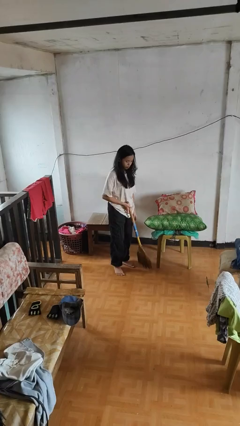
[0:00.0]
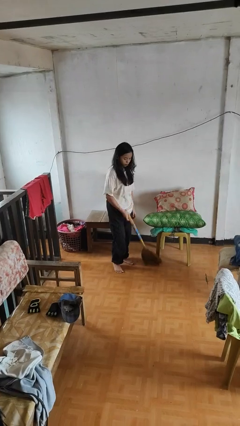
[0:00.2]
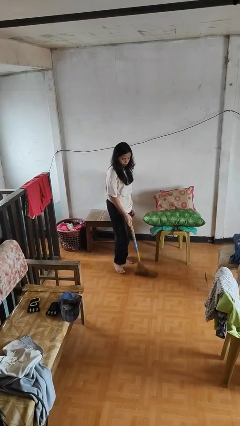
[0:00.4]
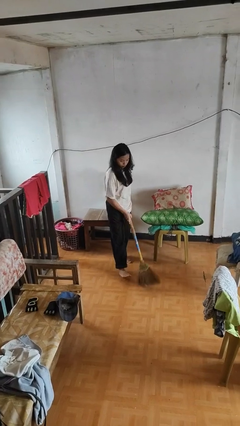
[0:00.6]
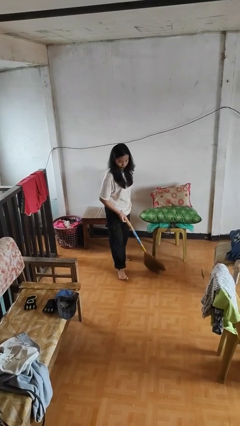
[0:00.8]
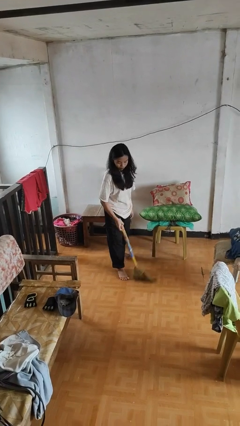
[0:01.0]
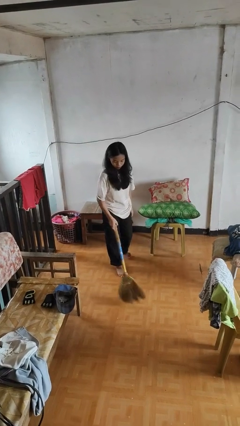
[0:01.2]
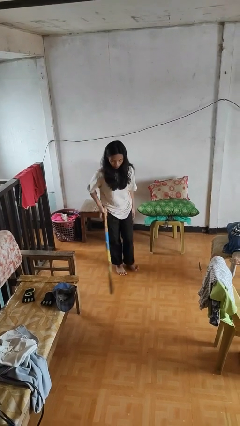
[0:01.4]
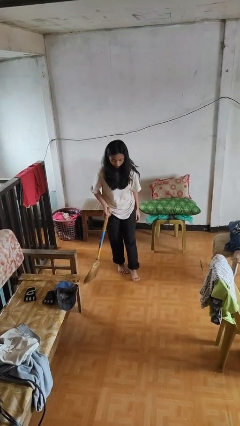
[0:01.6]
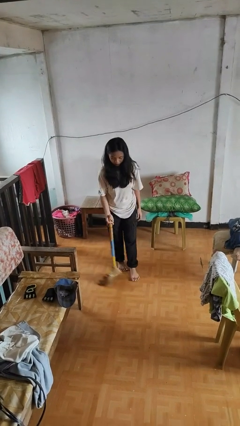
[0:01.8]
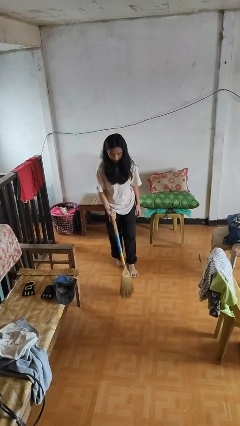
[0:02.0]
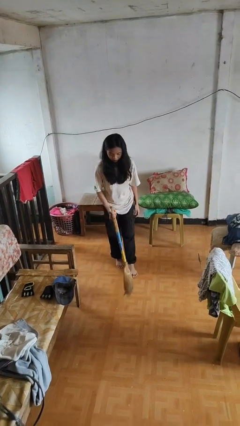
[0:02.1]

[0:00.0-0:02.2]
person sweeps floor

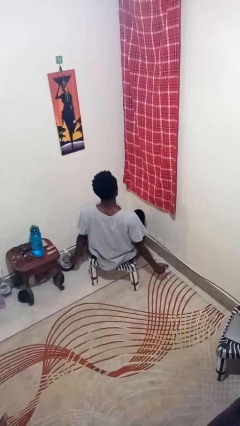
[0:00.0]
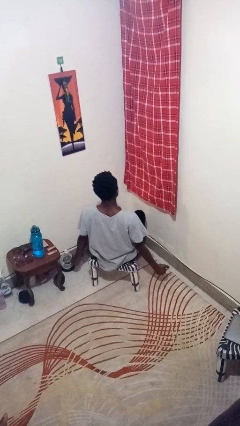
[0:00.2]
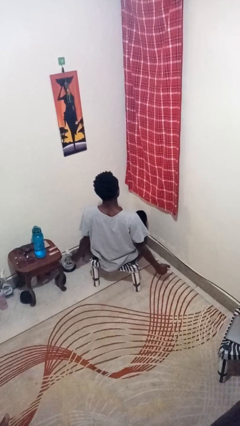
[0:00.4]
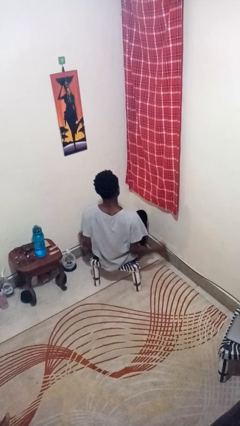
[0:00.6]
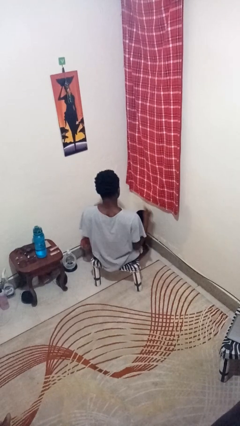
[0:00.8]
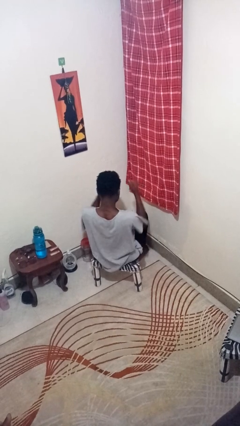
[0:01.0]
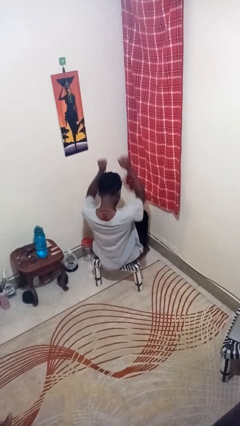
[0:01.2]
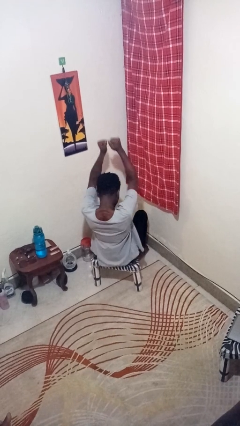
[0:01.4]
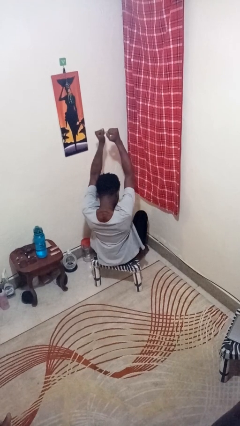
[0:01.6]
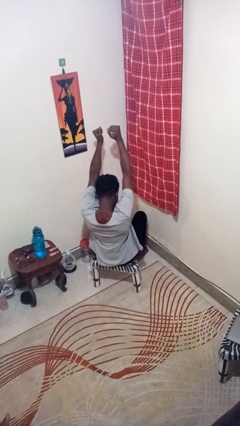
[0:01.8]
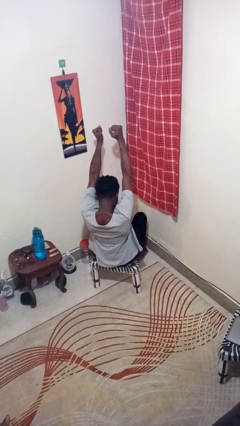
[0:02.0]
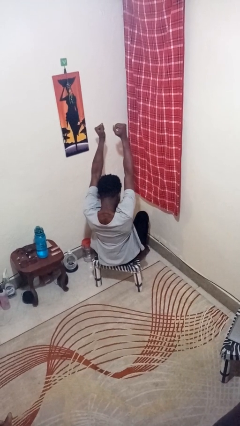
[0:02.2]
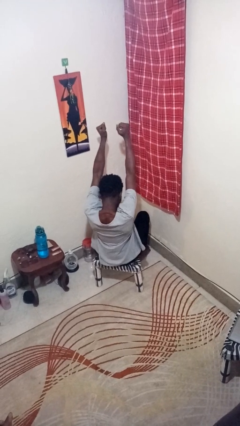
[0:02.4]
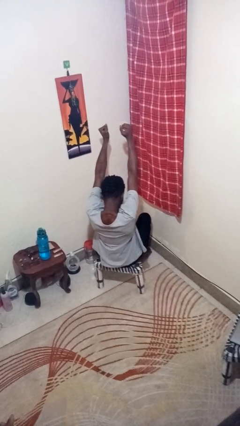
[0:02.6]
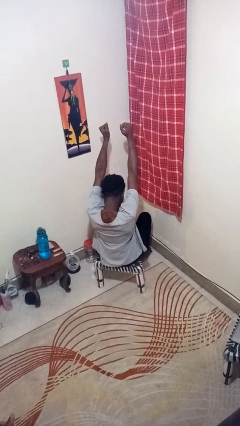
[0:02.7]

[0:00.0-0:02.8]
person stretches arms over head

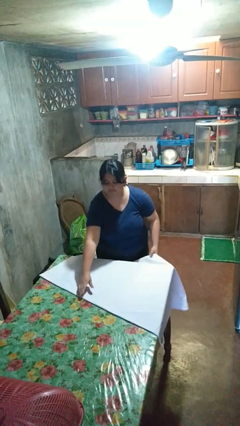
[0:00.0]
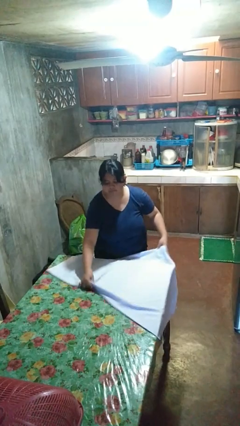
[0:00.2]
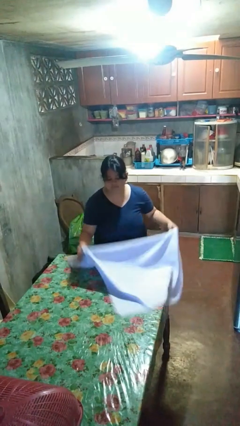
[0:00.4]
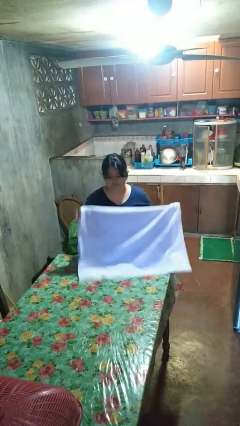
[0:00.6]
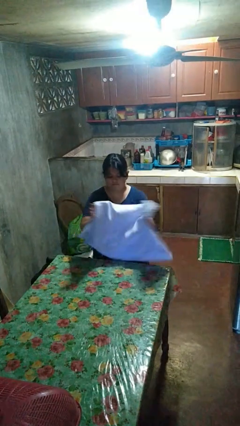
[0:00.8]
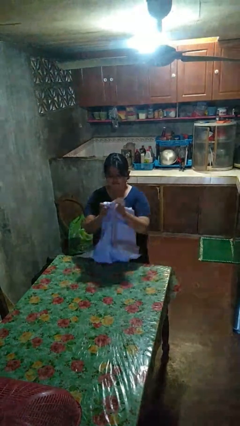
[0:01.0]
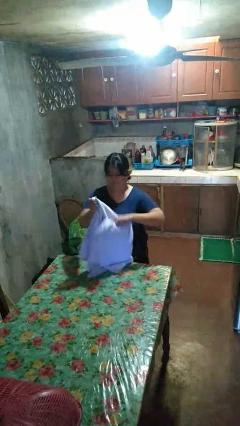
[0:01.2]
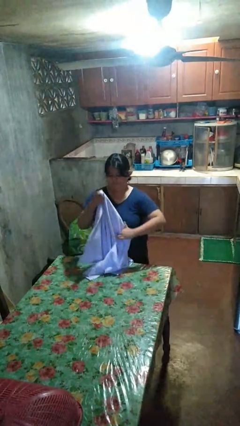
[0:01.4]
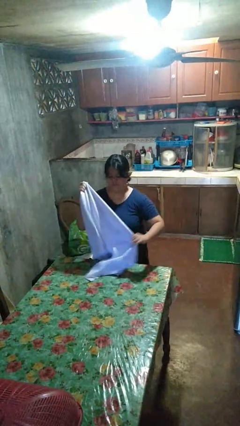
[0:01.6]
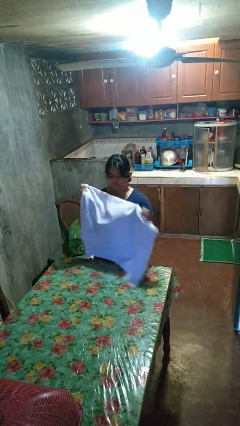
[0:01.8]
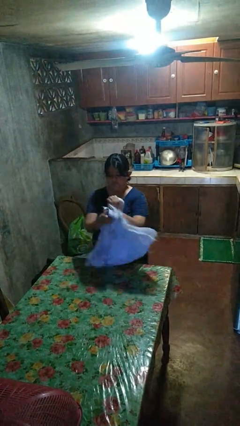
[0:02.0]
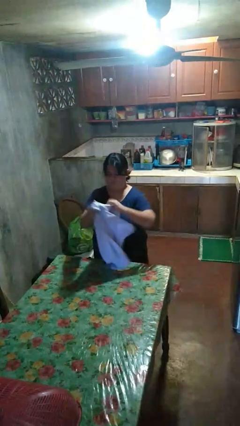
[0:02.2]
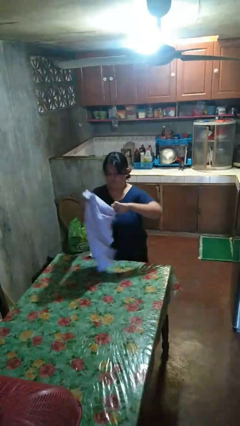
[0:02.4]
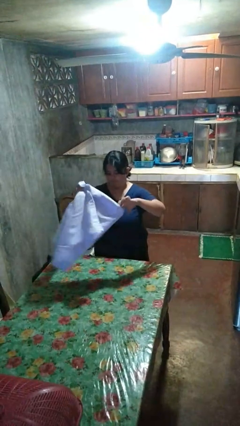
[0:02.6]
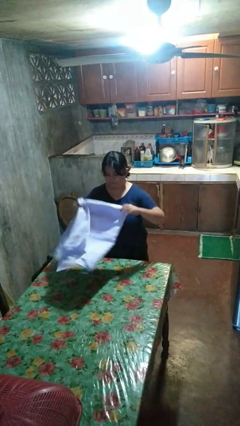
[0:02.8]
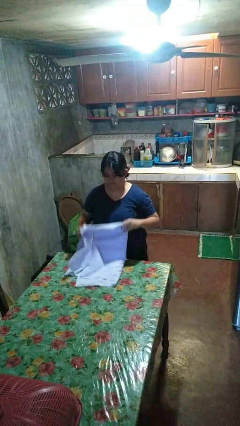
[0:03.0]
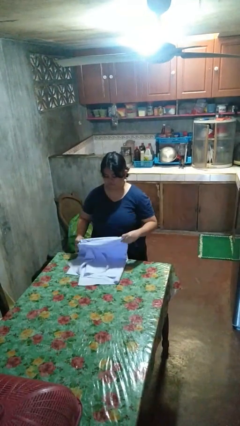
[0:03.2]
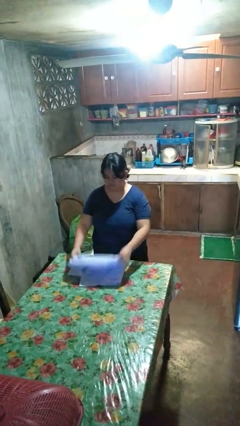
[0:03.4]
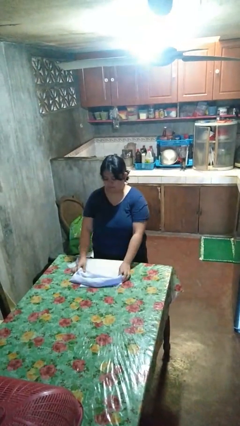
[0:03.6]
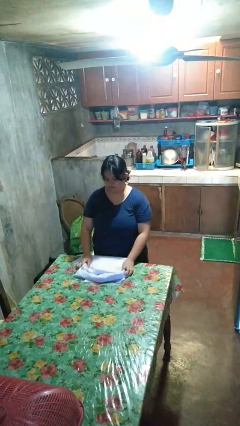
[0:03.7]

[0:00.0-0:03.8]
person folds tablecloth

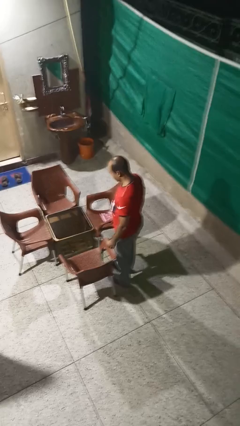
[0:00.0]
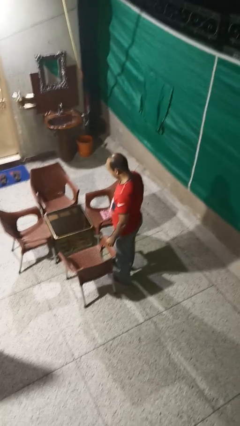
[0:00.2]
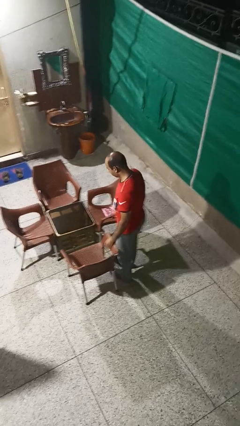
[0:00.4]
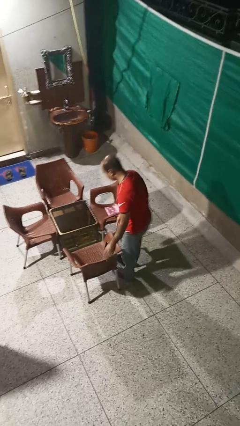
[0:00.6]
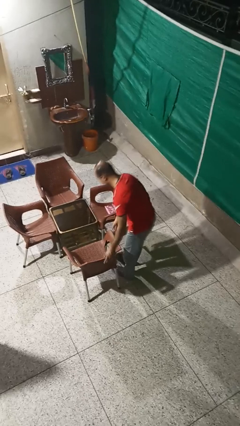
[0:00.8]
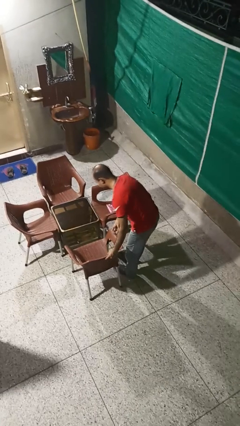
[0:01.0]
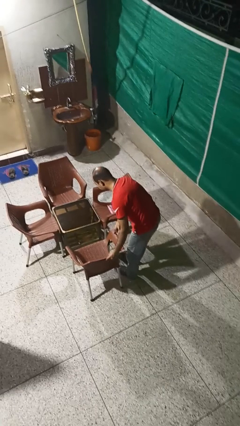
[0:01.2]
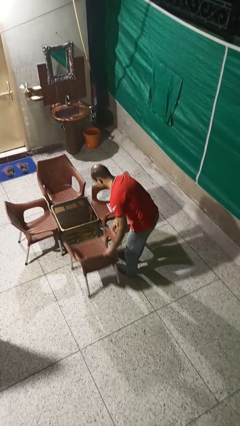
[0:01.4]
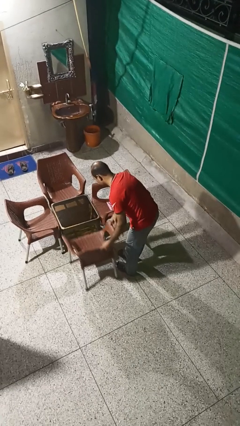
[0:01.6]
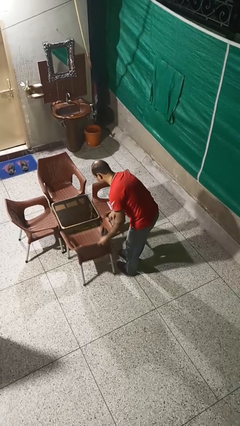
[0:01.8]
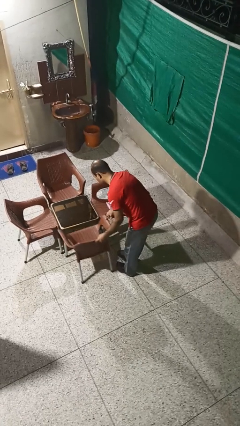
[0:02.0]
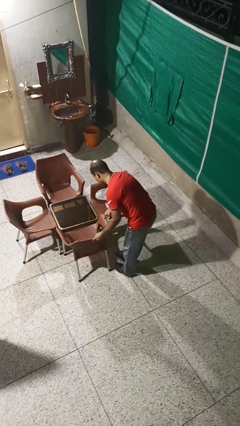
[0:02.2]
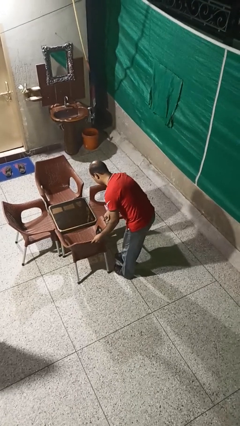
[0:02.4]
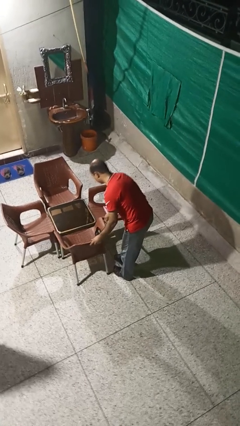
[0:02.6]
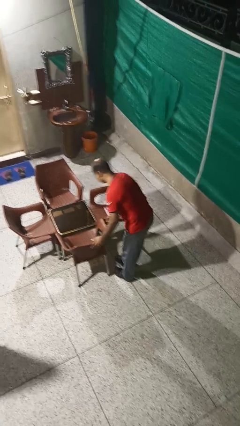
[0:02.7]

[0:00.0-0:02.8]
person pushes in chair

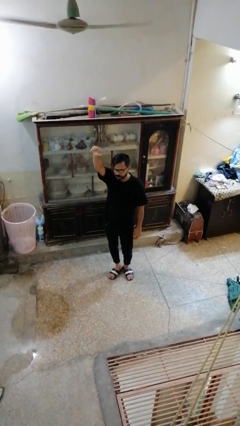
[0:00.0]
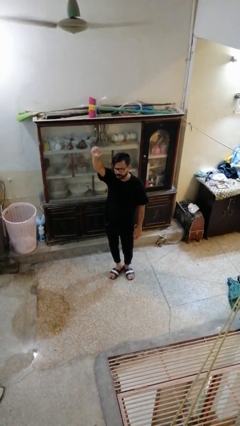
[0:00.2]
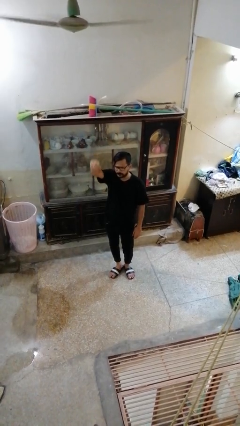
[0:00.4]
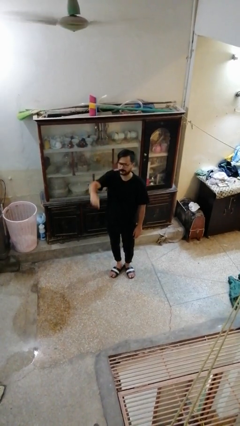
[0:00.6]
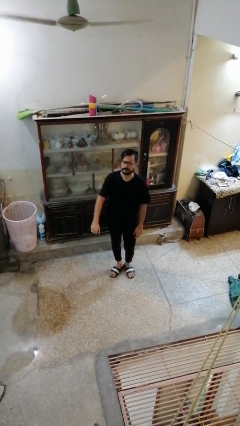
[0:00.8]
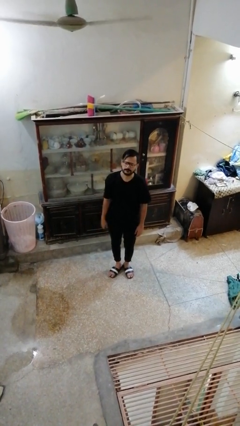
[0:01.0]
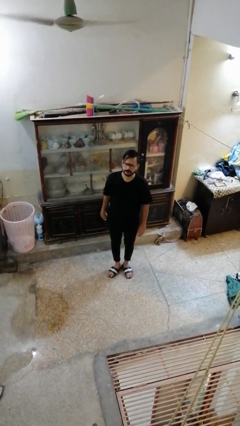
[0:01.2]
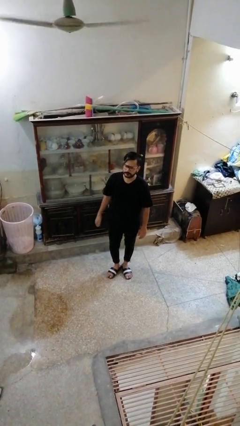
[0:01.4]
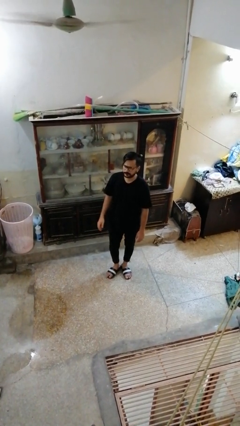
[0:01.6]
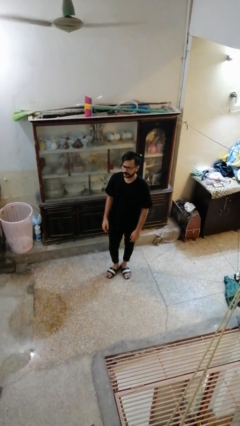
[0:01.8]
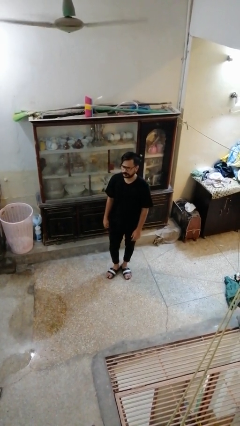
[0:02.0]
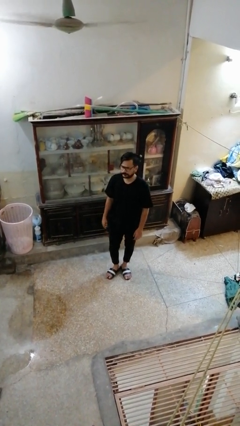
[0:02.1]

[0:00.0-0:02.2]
person gestures lower hand

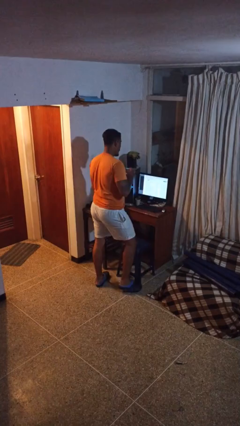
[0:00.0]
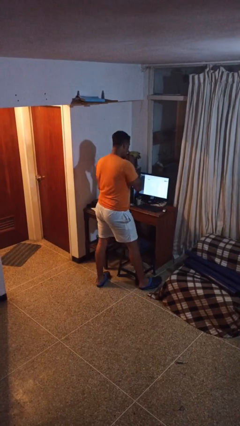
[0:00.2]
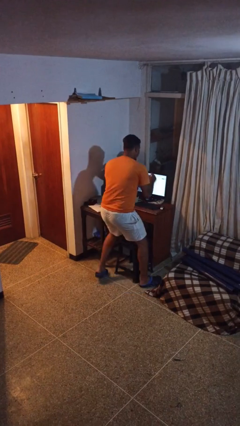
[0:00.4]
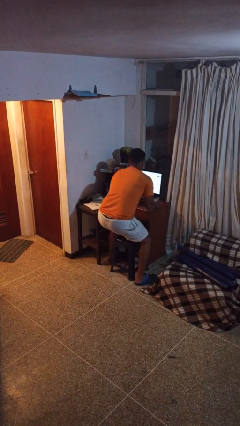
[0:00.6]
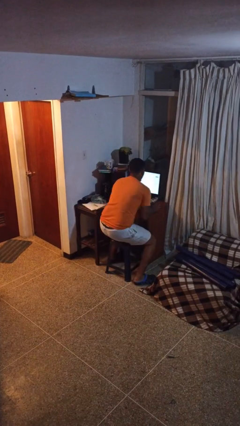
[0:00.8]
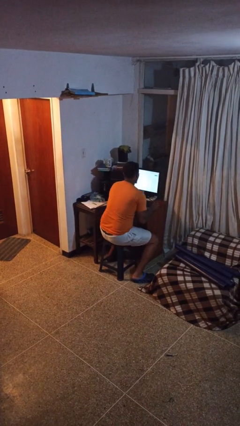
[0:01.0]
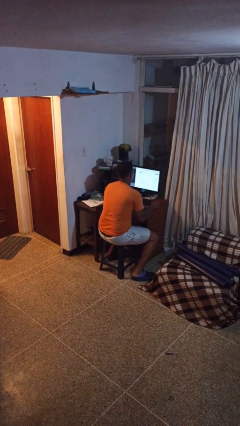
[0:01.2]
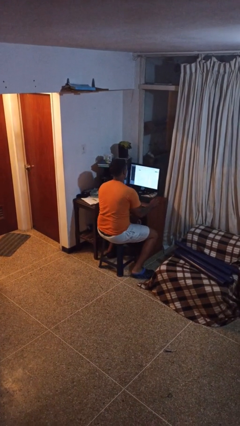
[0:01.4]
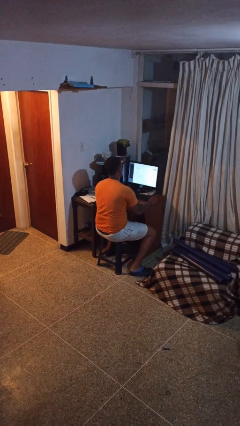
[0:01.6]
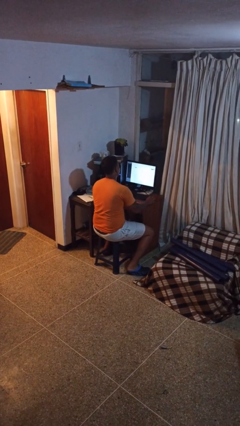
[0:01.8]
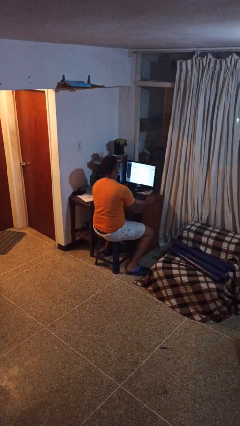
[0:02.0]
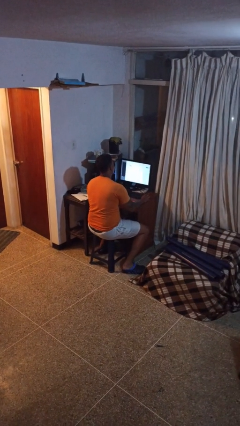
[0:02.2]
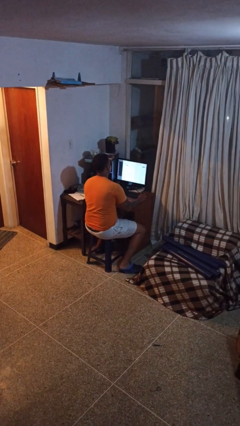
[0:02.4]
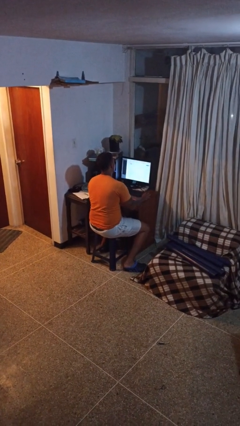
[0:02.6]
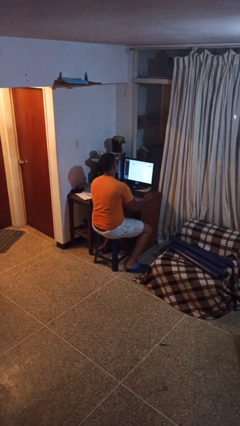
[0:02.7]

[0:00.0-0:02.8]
person sits down

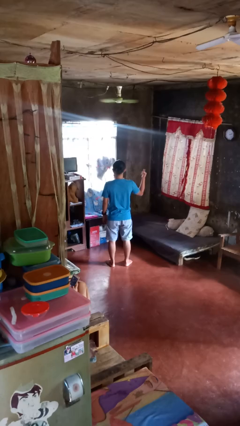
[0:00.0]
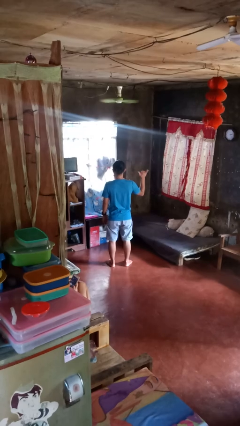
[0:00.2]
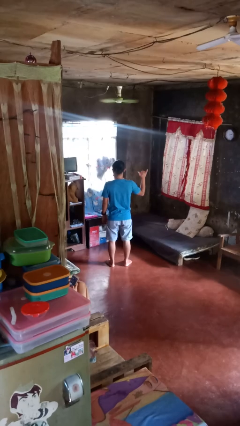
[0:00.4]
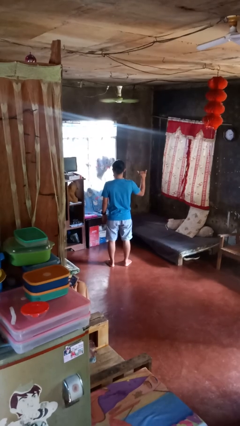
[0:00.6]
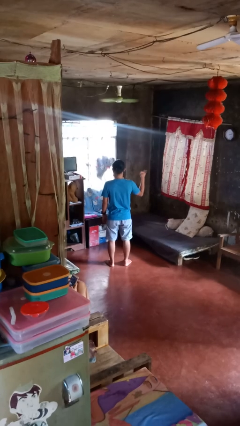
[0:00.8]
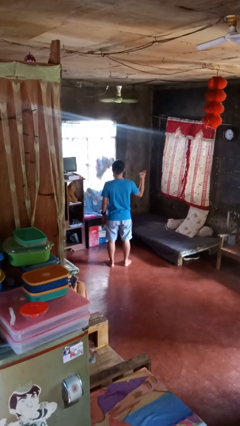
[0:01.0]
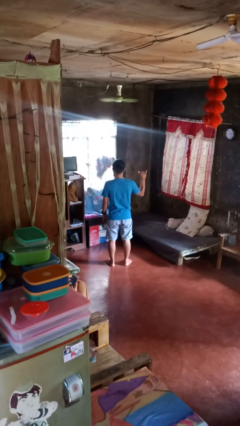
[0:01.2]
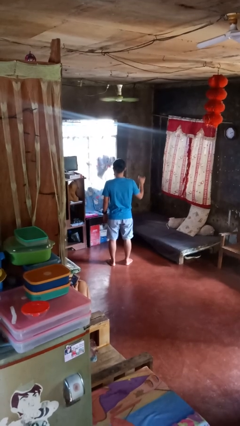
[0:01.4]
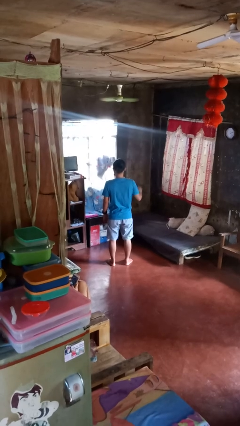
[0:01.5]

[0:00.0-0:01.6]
person gestures hang loose
